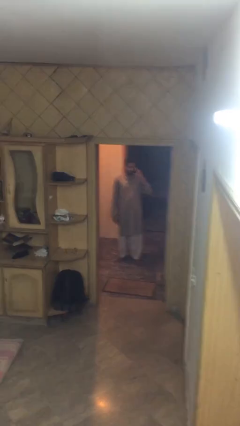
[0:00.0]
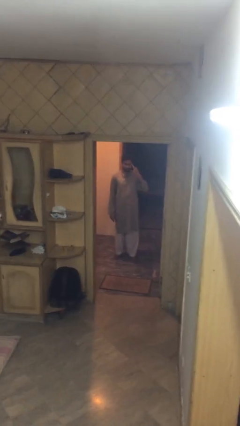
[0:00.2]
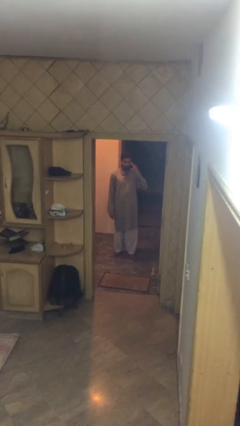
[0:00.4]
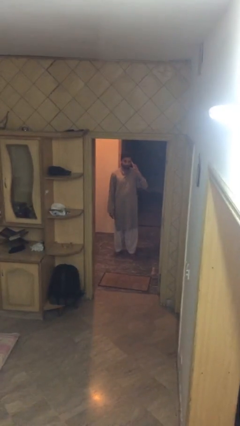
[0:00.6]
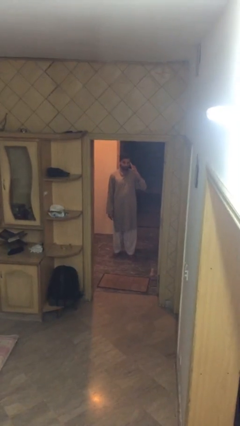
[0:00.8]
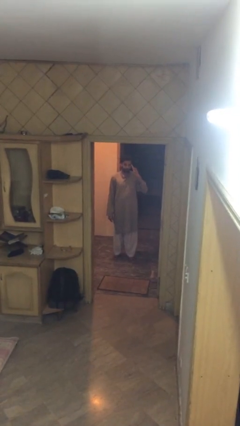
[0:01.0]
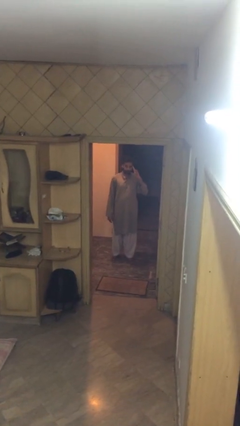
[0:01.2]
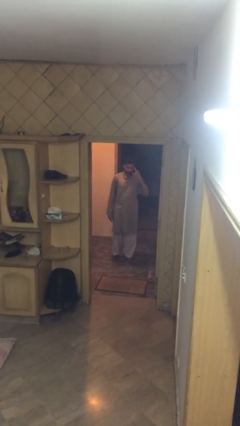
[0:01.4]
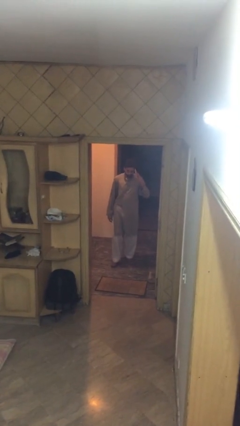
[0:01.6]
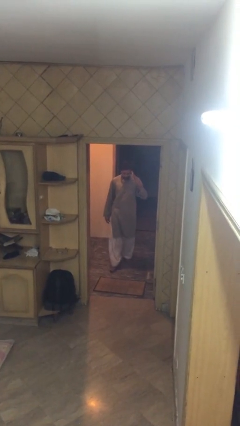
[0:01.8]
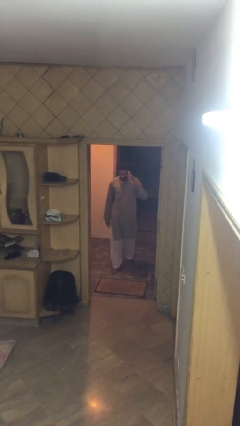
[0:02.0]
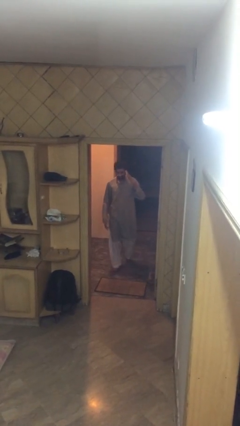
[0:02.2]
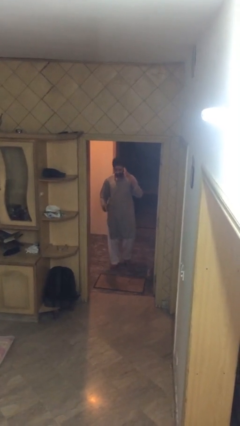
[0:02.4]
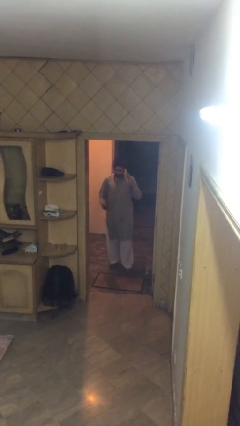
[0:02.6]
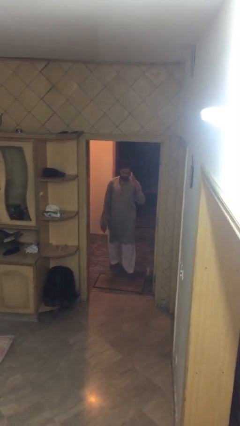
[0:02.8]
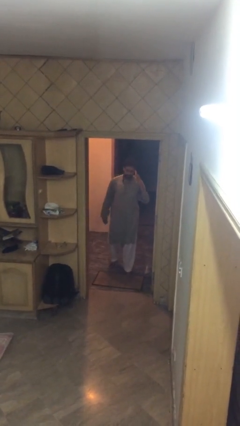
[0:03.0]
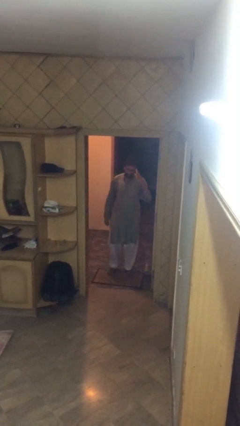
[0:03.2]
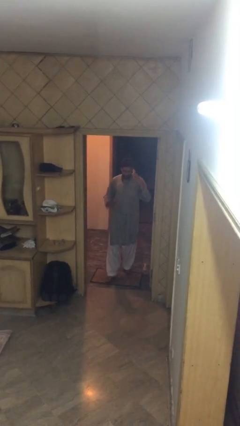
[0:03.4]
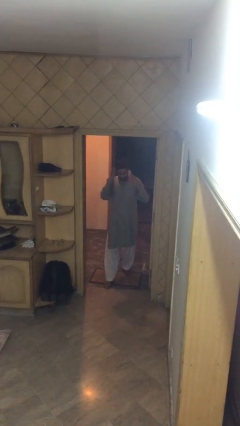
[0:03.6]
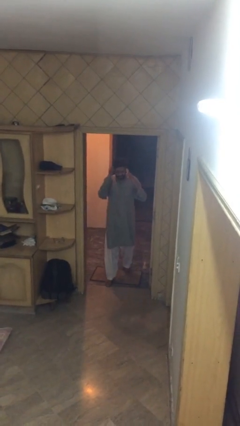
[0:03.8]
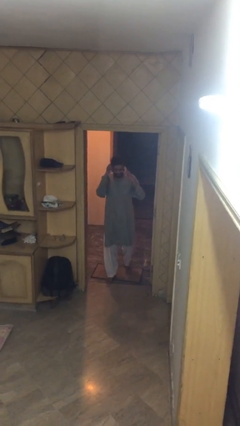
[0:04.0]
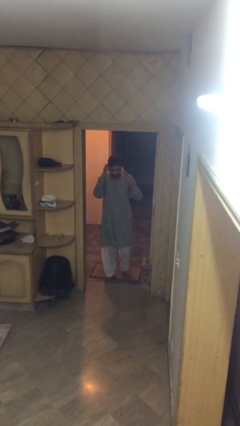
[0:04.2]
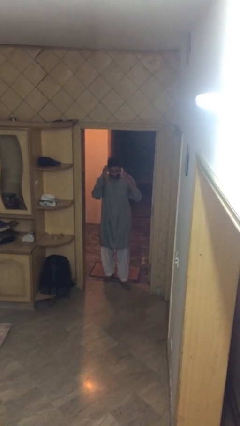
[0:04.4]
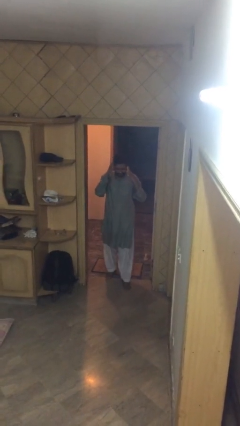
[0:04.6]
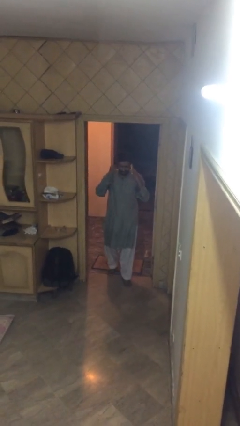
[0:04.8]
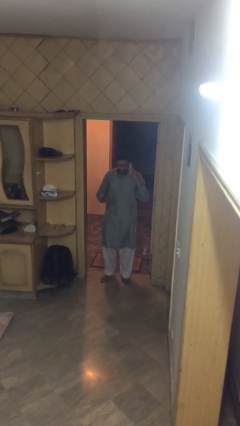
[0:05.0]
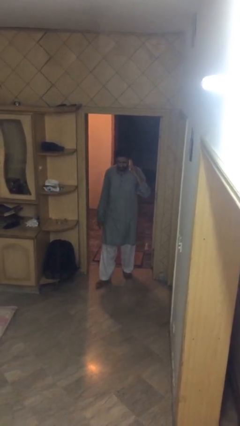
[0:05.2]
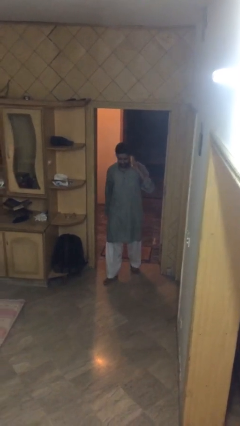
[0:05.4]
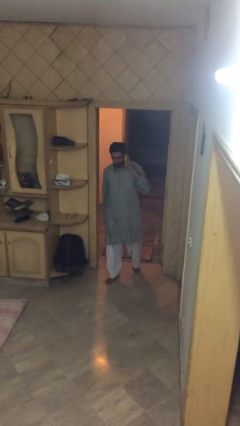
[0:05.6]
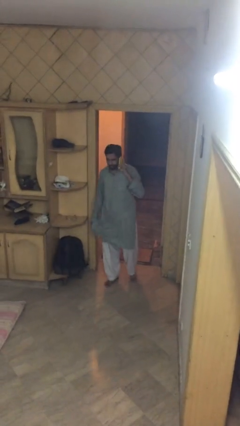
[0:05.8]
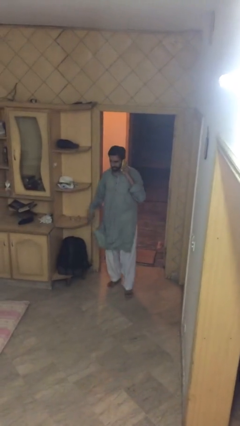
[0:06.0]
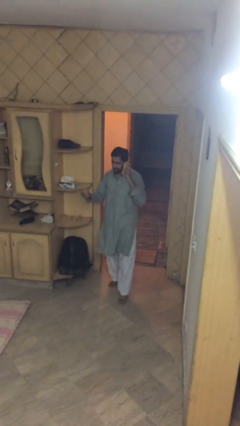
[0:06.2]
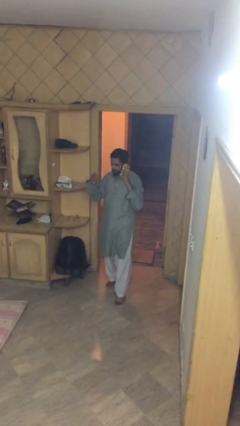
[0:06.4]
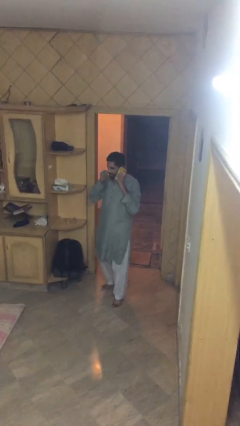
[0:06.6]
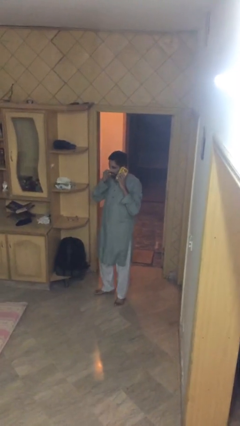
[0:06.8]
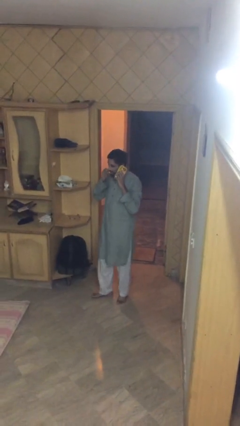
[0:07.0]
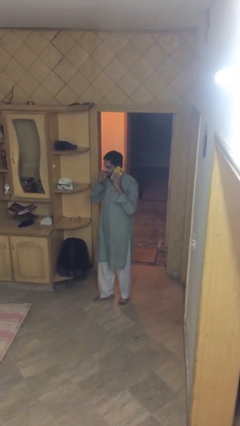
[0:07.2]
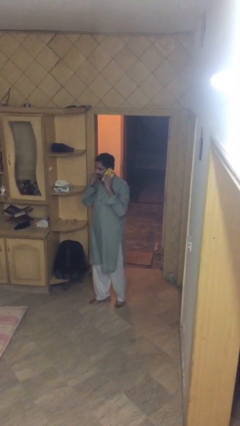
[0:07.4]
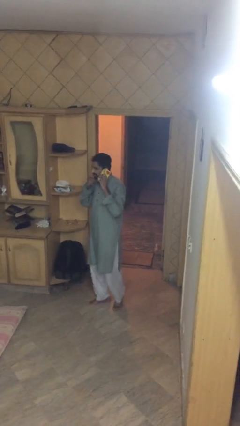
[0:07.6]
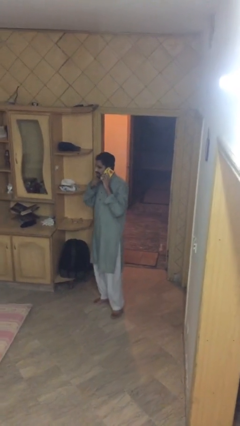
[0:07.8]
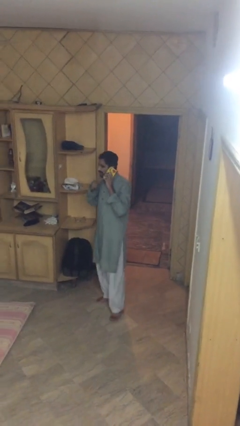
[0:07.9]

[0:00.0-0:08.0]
person enters scene through structure

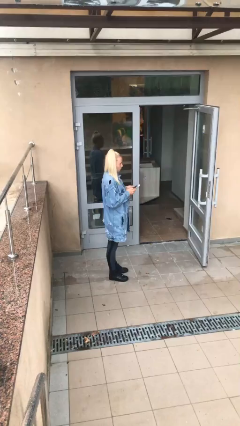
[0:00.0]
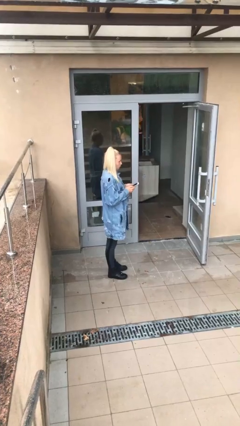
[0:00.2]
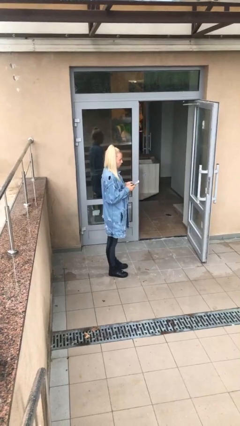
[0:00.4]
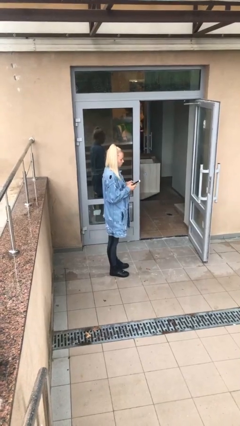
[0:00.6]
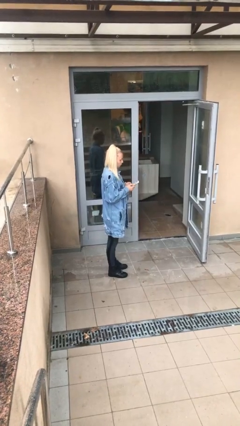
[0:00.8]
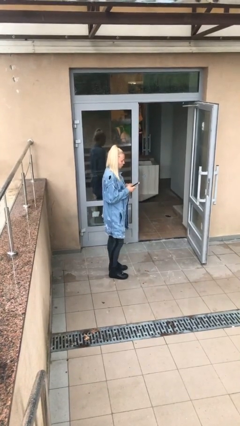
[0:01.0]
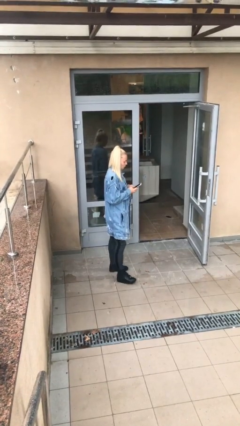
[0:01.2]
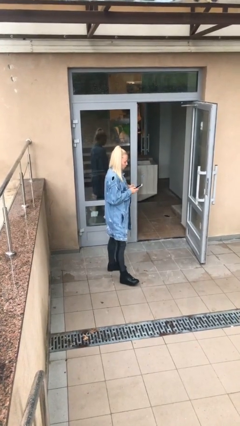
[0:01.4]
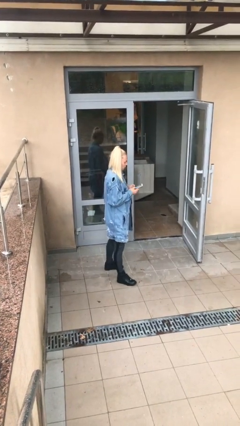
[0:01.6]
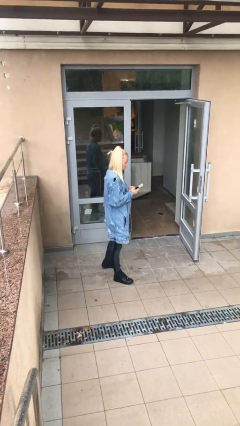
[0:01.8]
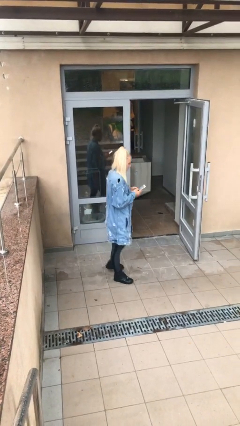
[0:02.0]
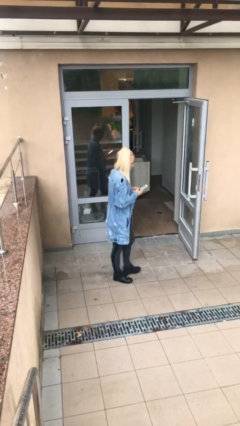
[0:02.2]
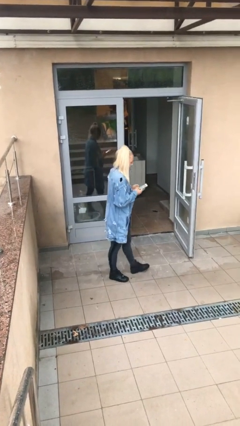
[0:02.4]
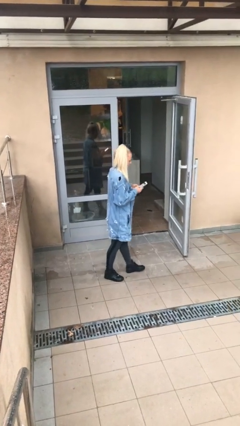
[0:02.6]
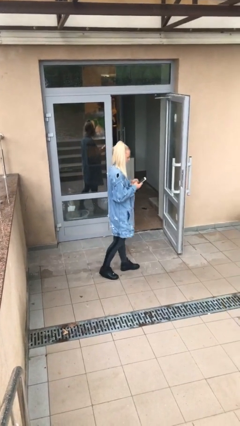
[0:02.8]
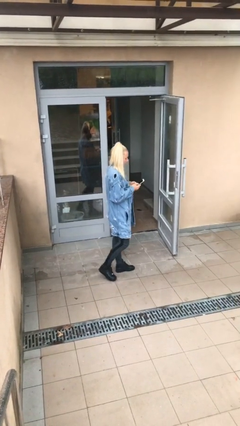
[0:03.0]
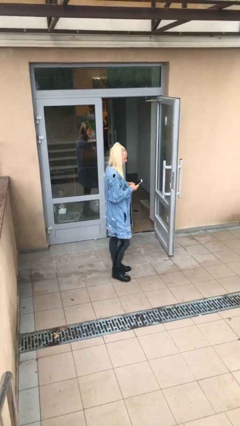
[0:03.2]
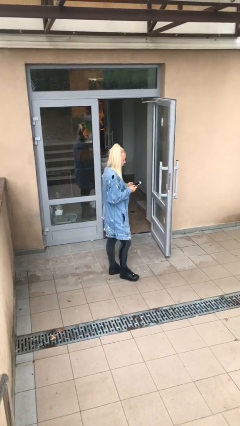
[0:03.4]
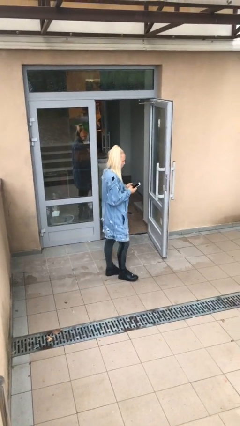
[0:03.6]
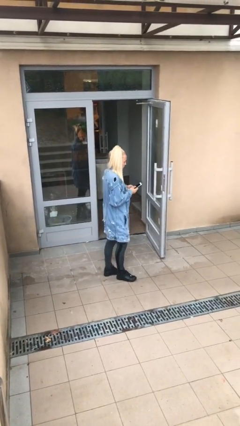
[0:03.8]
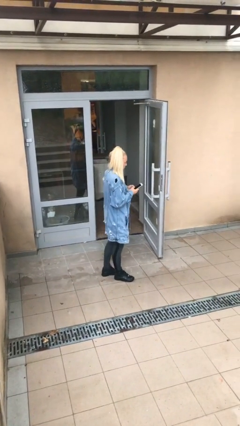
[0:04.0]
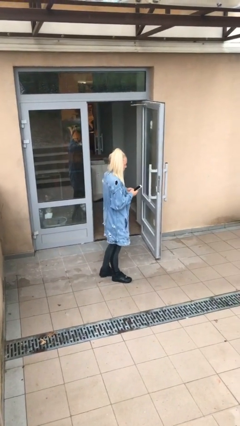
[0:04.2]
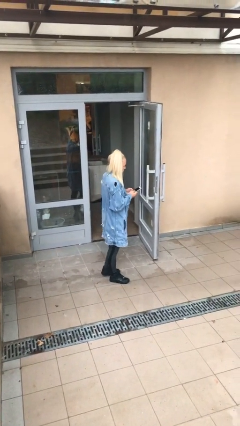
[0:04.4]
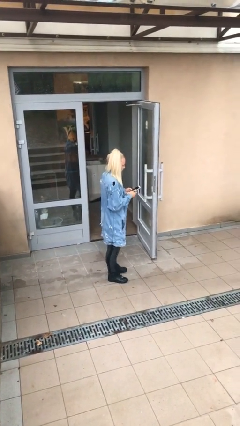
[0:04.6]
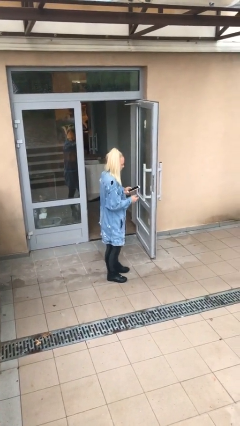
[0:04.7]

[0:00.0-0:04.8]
person texts on phone

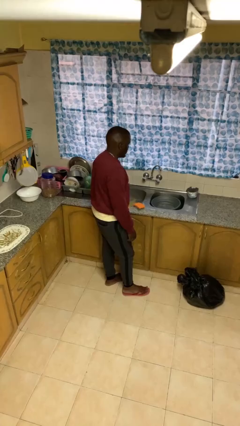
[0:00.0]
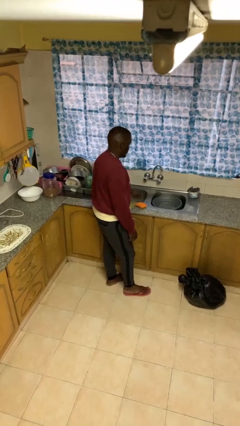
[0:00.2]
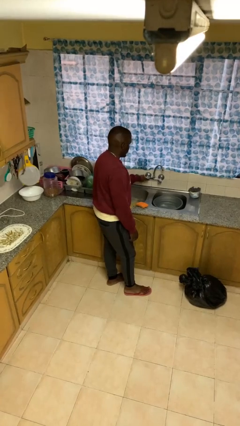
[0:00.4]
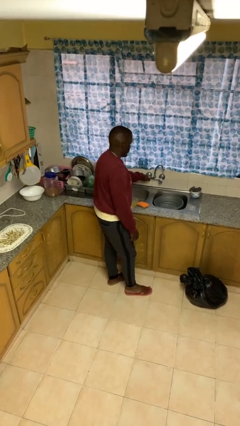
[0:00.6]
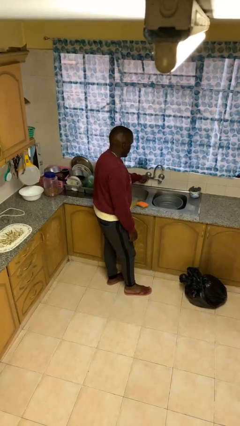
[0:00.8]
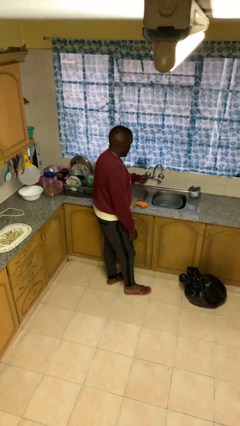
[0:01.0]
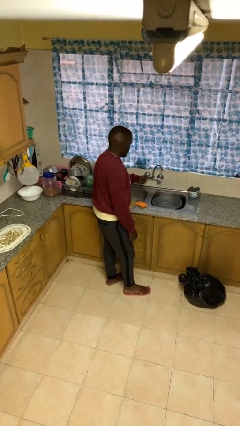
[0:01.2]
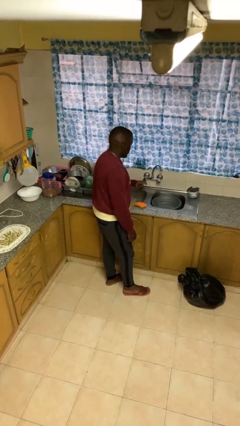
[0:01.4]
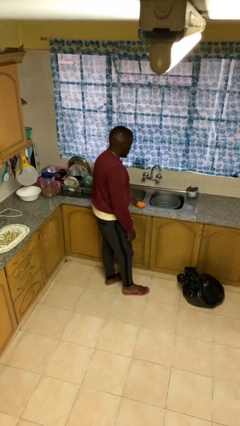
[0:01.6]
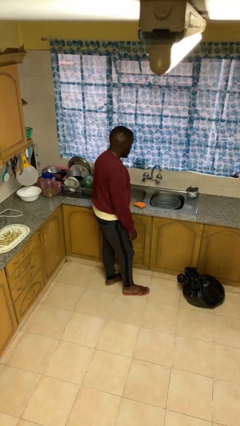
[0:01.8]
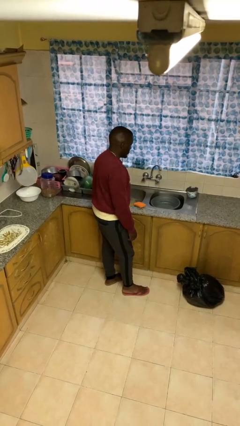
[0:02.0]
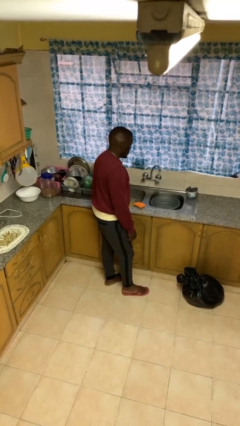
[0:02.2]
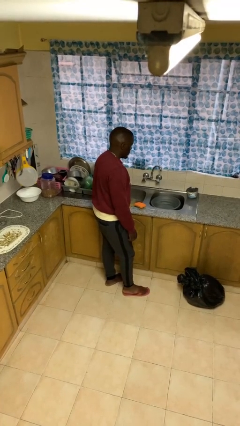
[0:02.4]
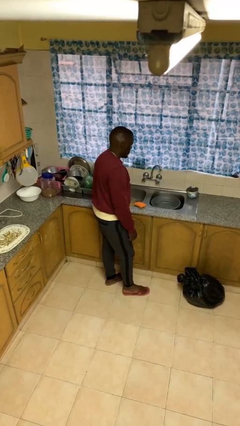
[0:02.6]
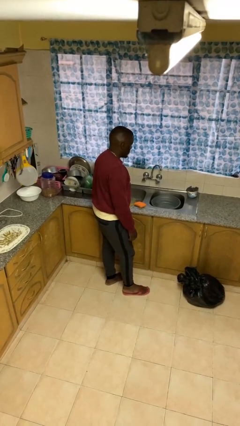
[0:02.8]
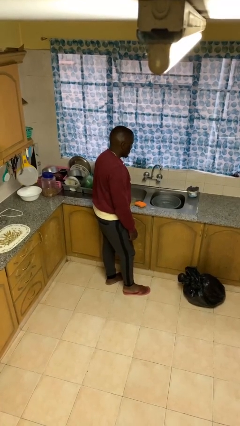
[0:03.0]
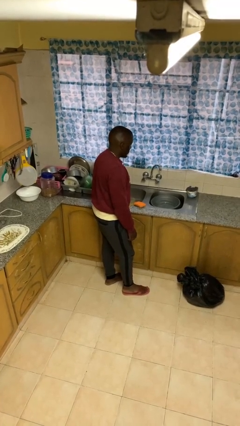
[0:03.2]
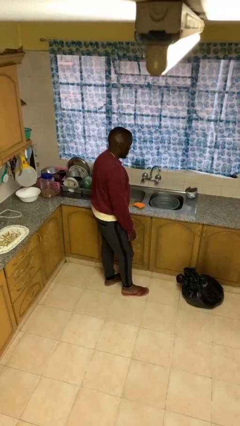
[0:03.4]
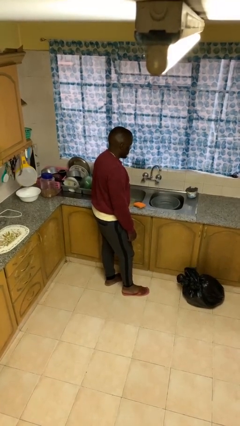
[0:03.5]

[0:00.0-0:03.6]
person turns on faucet

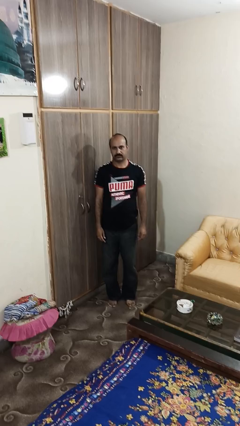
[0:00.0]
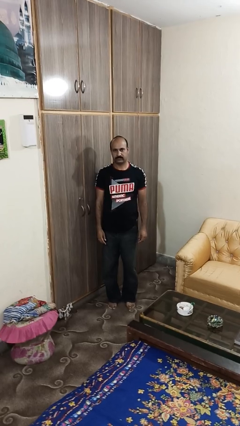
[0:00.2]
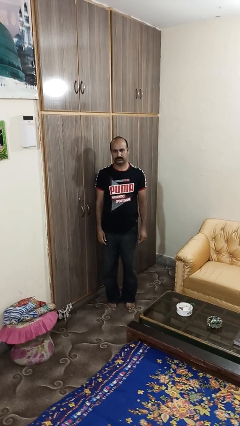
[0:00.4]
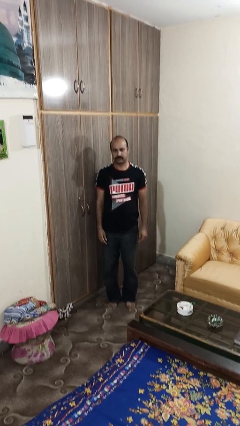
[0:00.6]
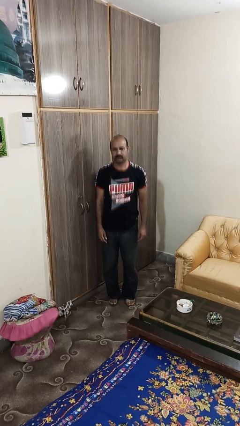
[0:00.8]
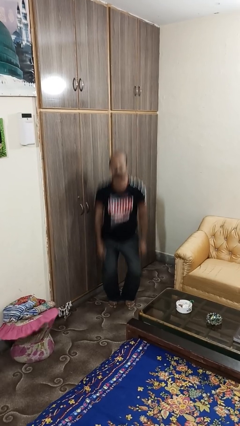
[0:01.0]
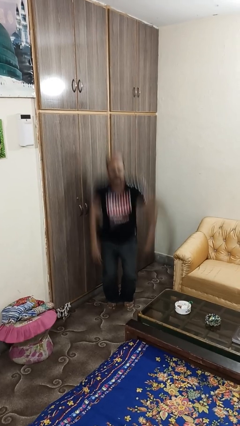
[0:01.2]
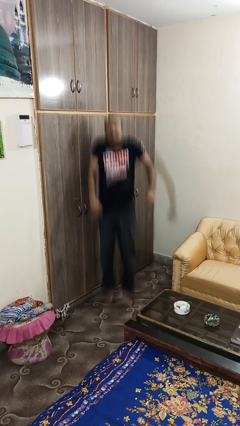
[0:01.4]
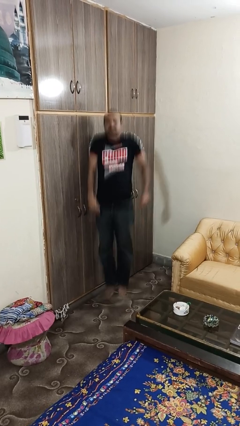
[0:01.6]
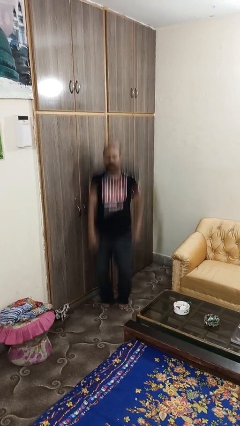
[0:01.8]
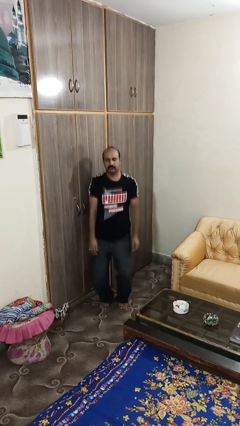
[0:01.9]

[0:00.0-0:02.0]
person jumps
